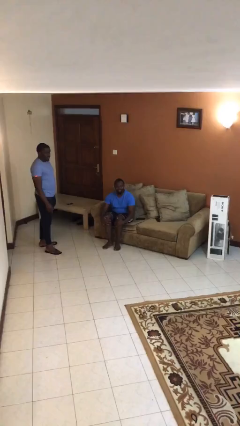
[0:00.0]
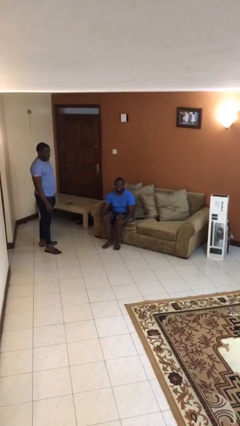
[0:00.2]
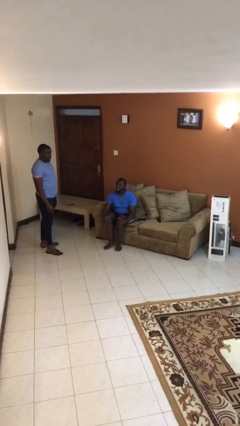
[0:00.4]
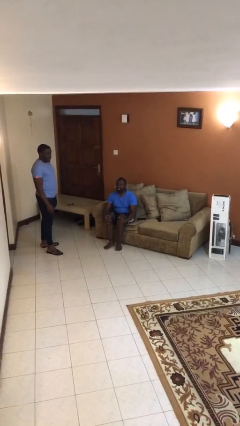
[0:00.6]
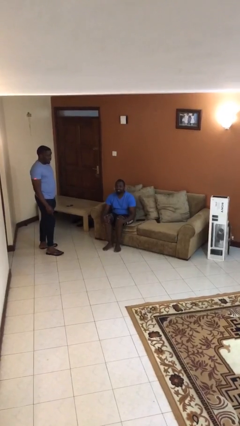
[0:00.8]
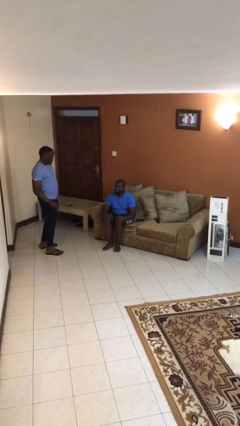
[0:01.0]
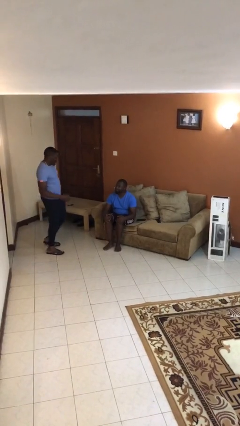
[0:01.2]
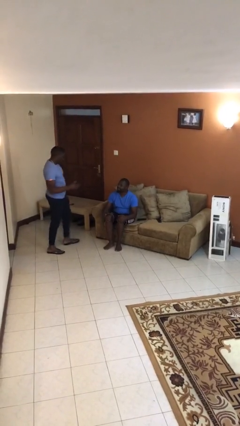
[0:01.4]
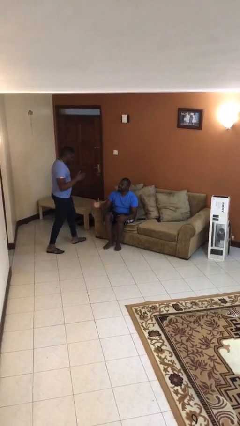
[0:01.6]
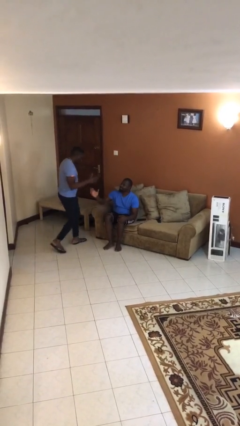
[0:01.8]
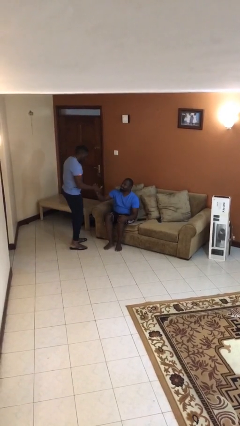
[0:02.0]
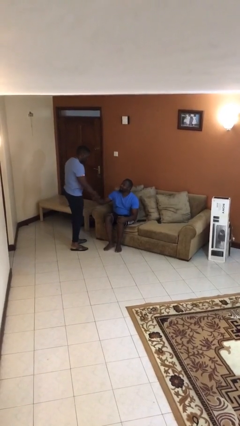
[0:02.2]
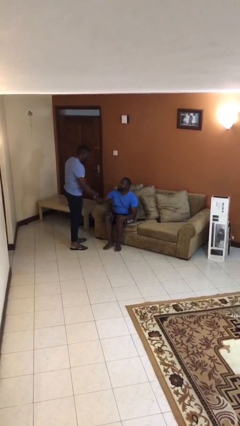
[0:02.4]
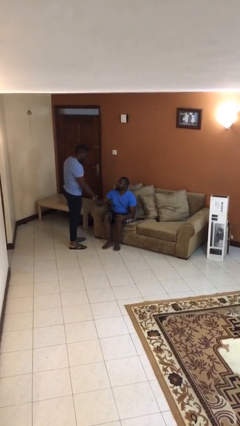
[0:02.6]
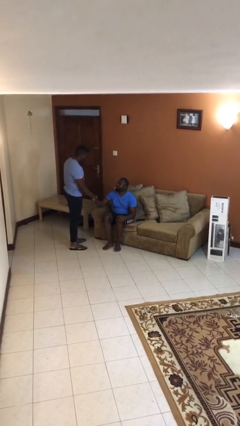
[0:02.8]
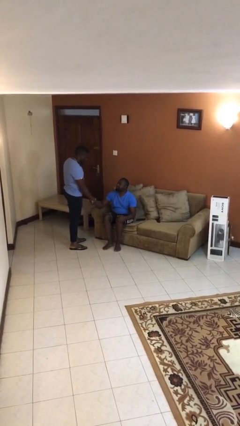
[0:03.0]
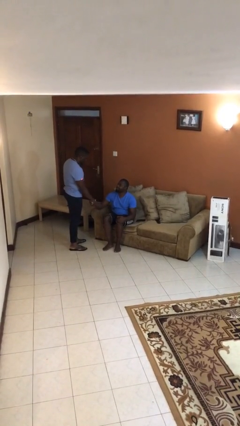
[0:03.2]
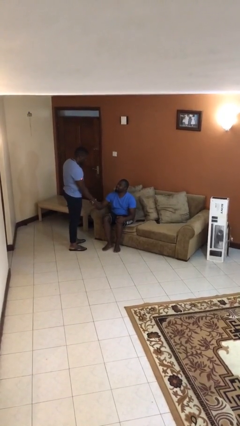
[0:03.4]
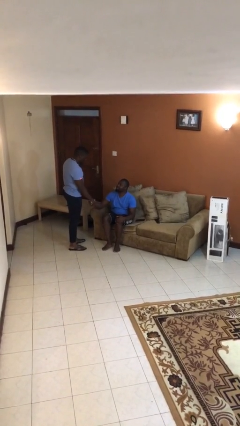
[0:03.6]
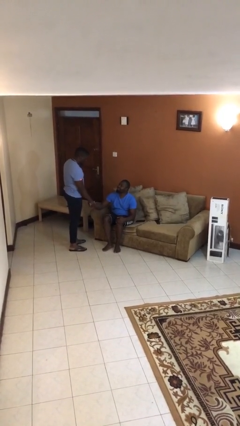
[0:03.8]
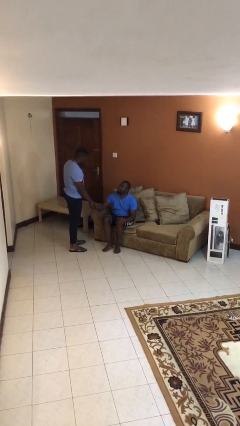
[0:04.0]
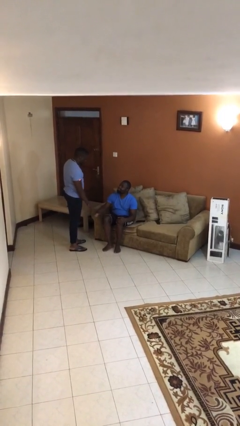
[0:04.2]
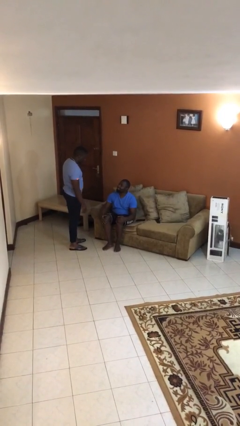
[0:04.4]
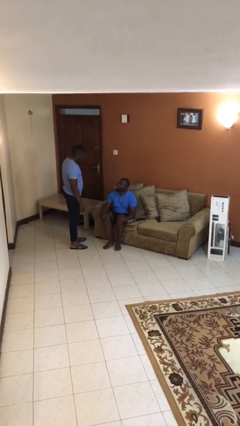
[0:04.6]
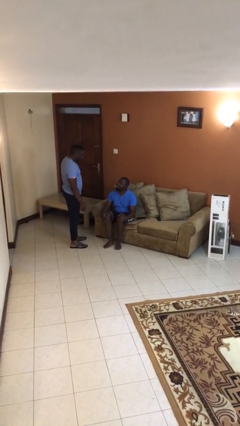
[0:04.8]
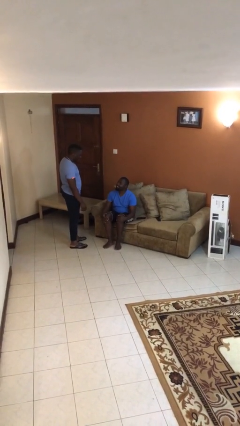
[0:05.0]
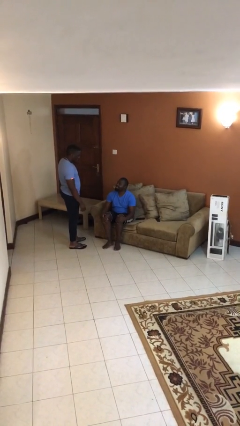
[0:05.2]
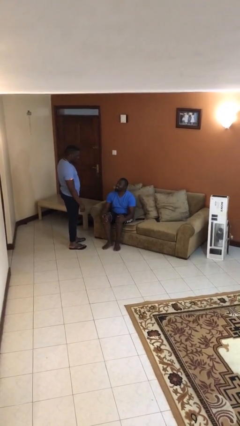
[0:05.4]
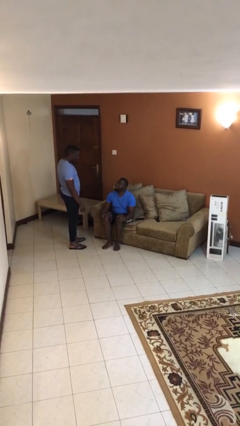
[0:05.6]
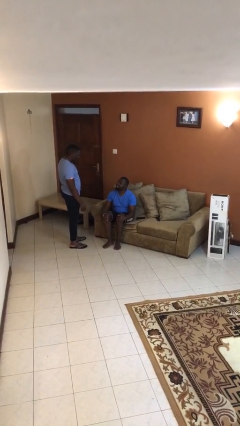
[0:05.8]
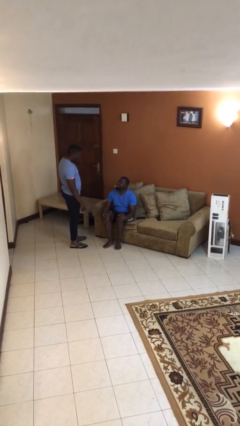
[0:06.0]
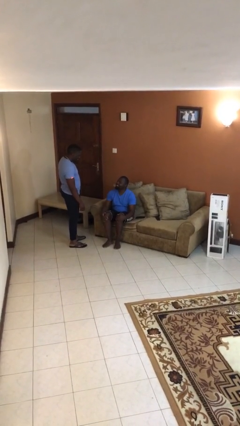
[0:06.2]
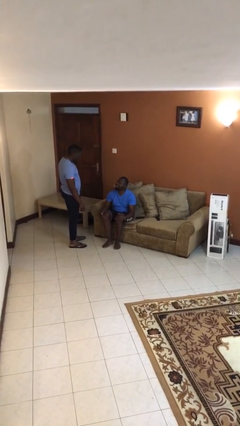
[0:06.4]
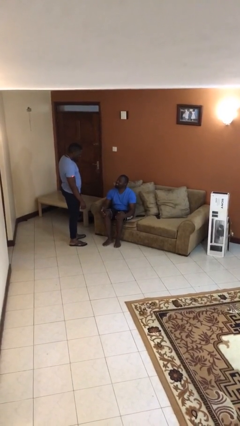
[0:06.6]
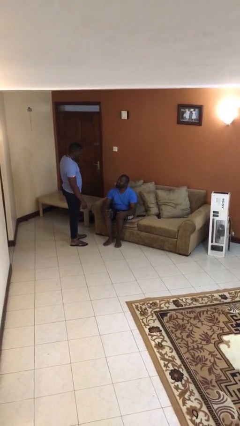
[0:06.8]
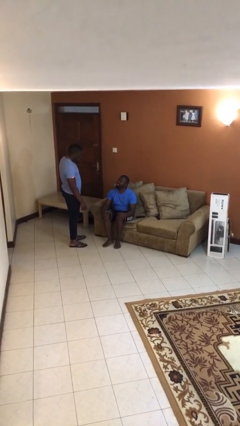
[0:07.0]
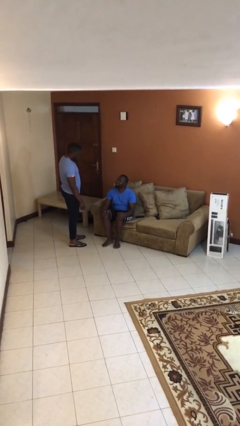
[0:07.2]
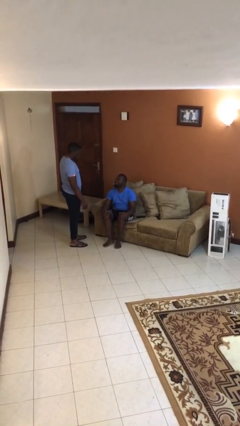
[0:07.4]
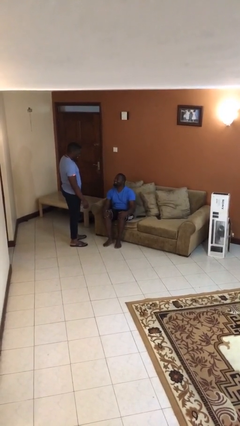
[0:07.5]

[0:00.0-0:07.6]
person shakes hand

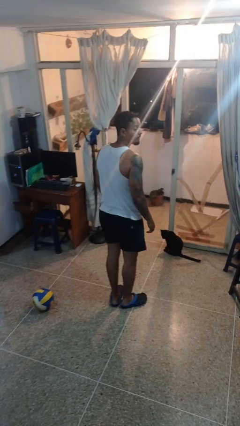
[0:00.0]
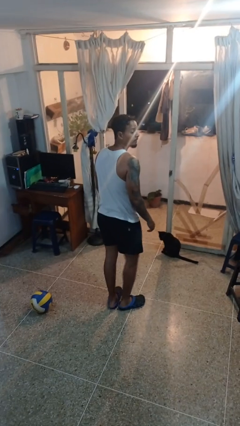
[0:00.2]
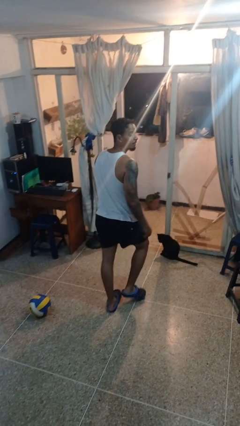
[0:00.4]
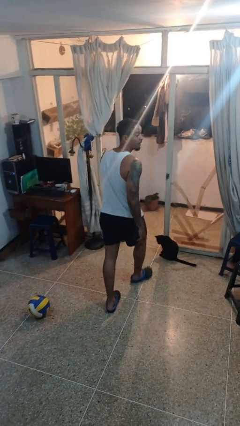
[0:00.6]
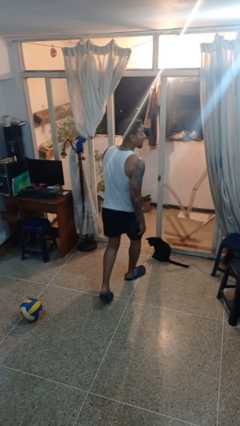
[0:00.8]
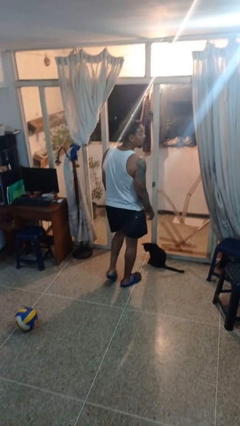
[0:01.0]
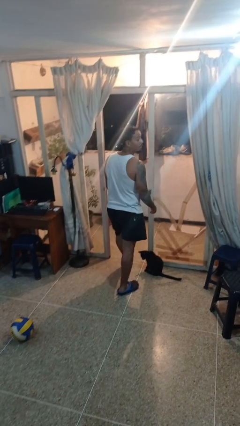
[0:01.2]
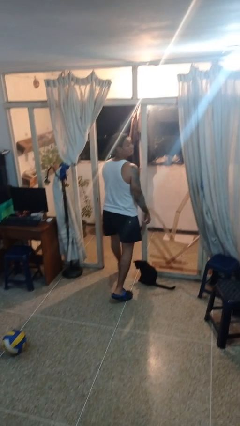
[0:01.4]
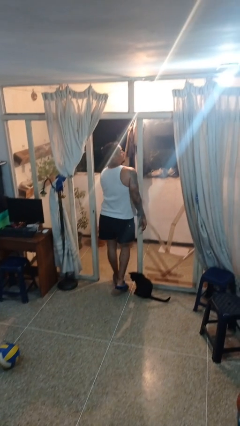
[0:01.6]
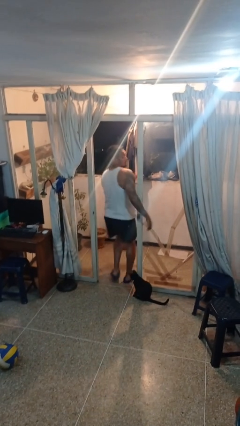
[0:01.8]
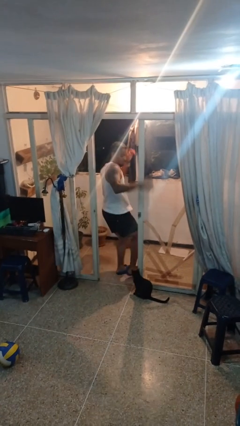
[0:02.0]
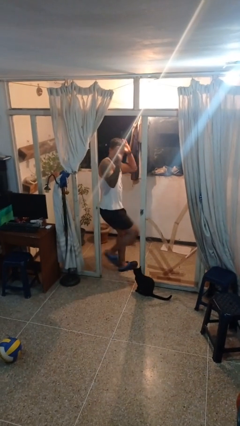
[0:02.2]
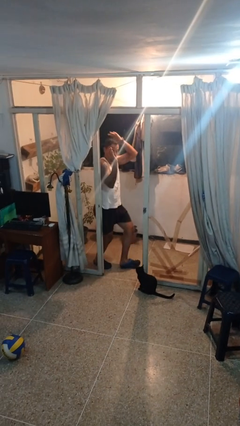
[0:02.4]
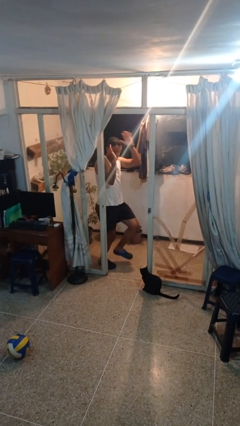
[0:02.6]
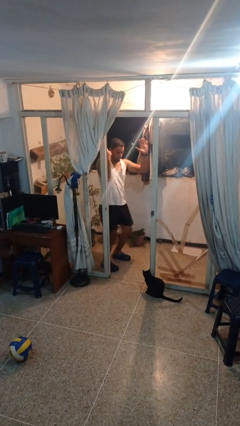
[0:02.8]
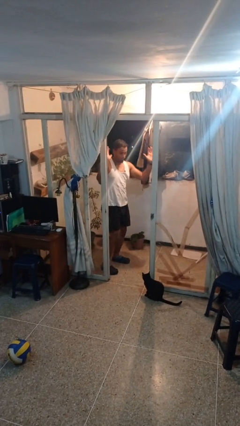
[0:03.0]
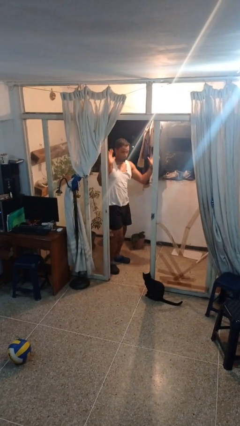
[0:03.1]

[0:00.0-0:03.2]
person bumps into wall

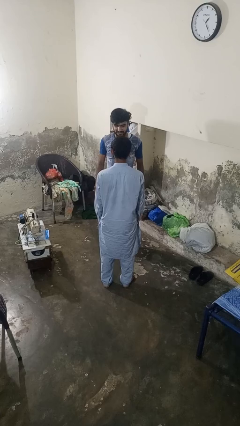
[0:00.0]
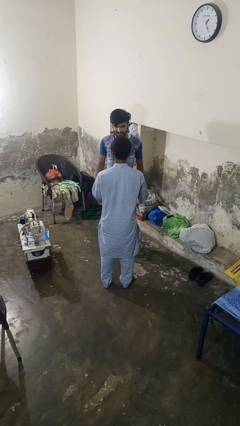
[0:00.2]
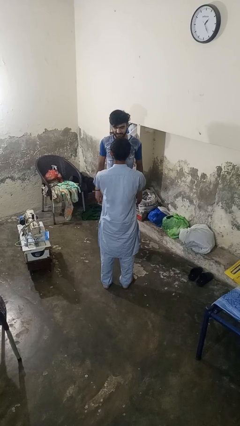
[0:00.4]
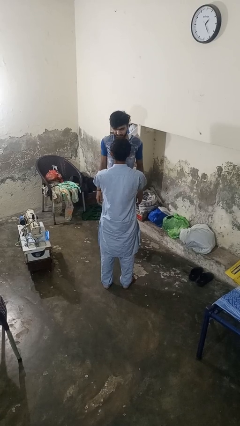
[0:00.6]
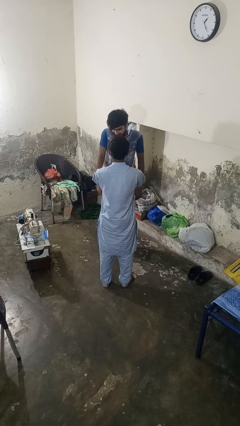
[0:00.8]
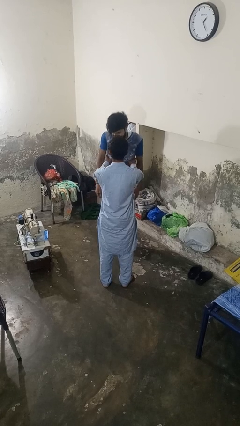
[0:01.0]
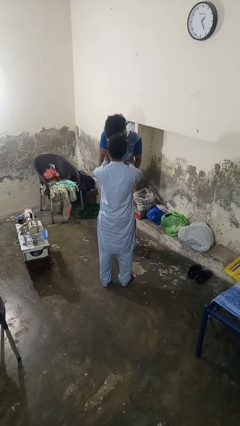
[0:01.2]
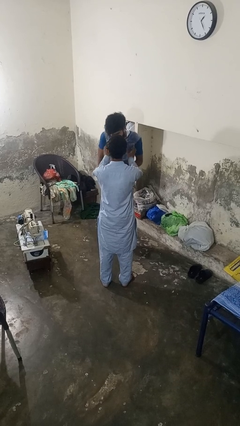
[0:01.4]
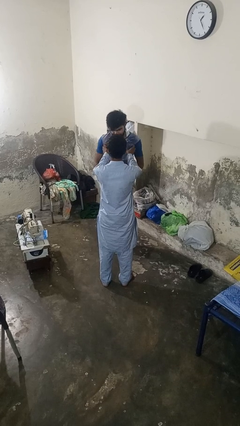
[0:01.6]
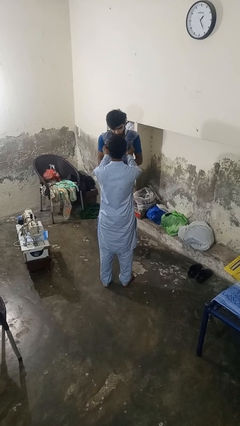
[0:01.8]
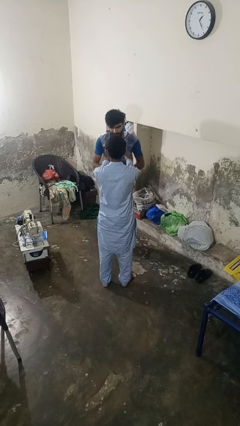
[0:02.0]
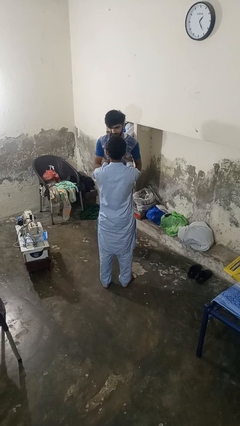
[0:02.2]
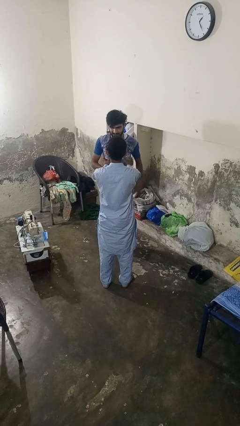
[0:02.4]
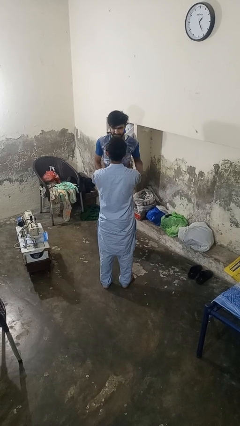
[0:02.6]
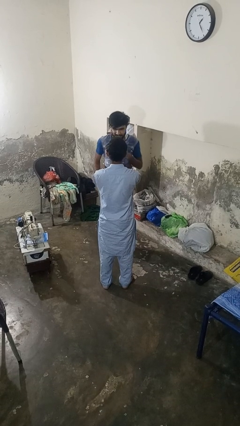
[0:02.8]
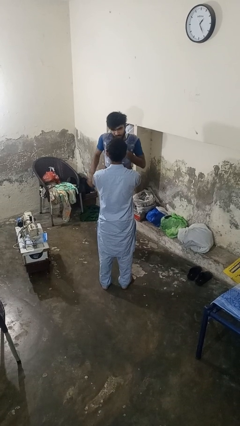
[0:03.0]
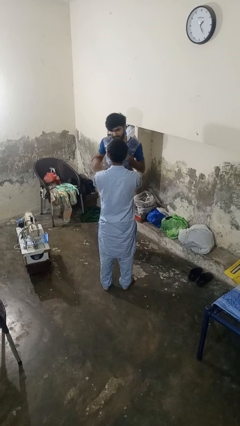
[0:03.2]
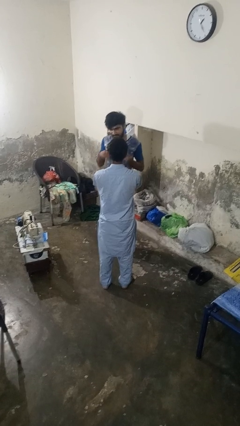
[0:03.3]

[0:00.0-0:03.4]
person tickles person

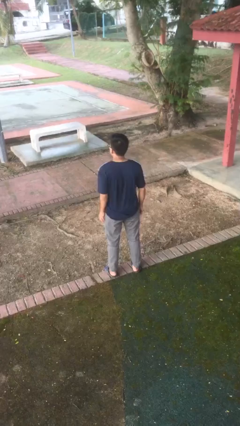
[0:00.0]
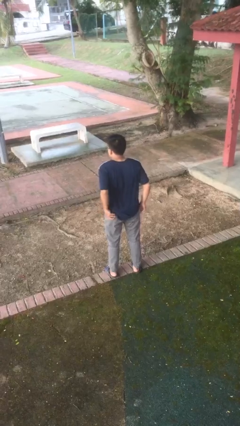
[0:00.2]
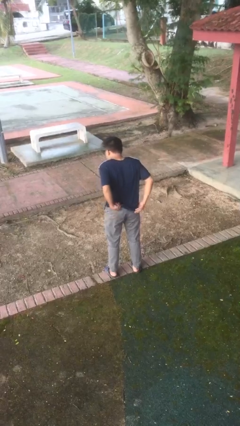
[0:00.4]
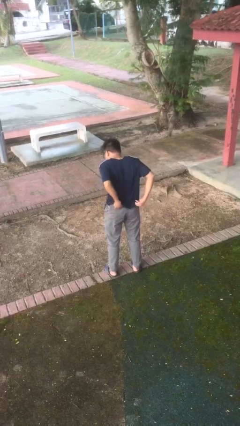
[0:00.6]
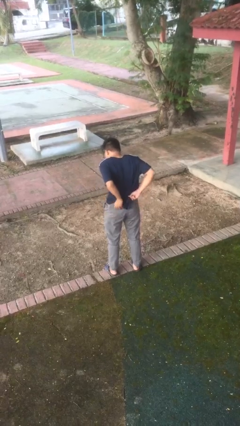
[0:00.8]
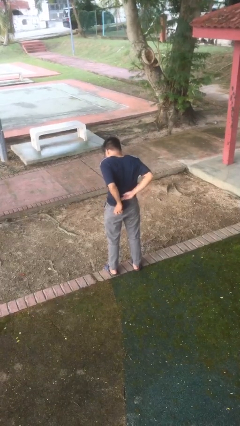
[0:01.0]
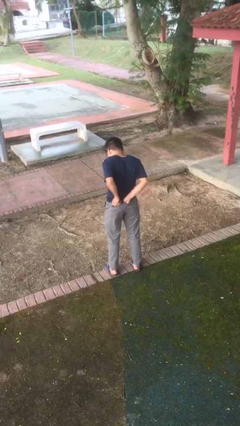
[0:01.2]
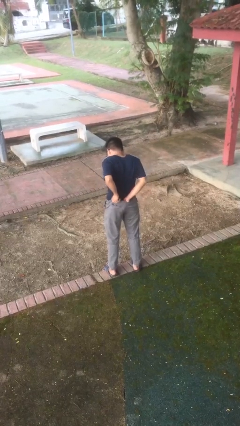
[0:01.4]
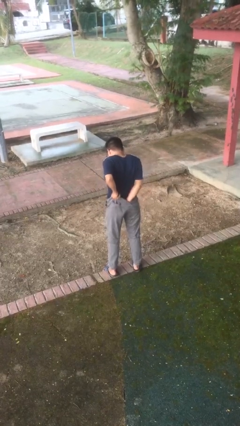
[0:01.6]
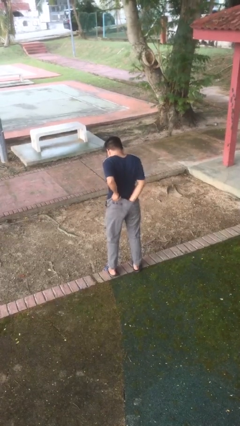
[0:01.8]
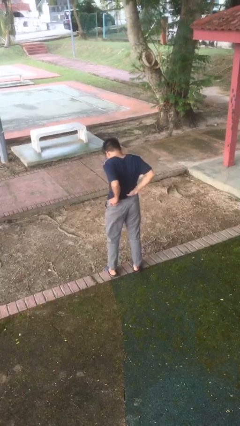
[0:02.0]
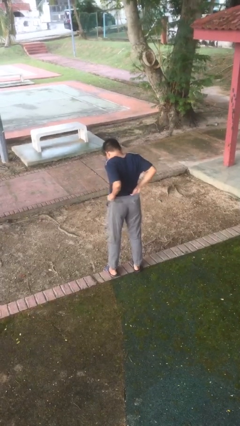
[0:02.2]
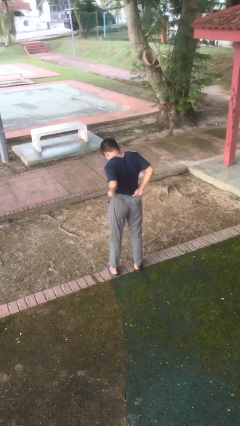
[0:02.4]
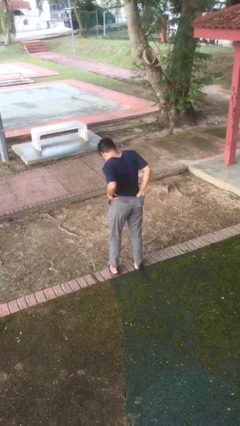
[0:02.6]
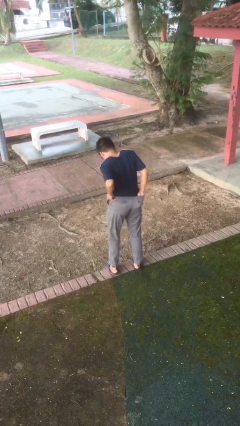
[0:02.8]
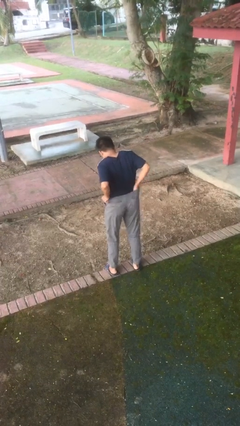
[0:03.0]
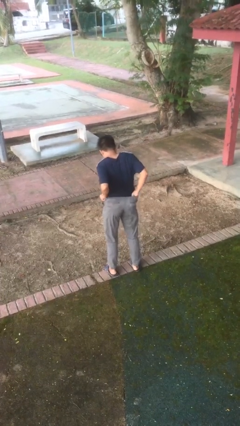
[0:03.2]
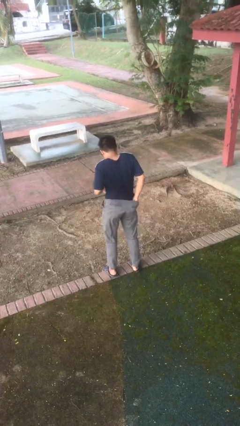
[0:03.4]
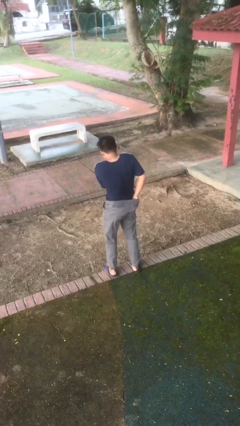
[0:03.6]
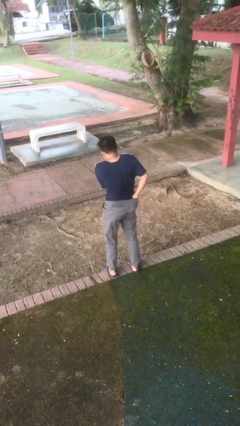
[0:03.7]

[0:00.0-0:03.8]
person tucks in shirt
